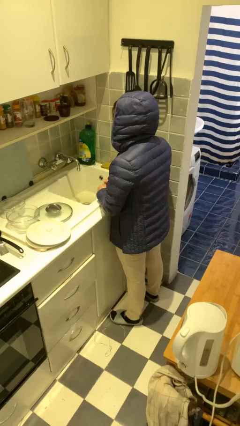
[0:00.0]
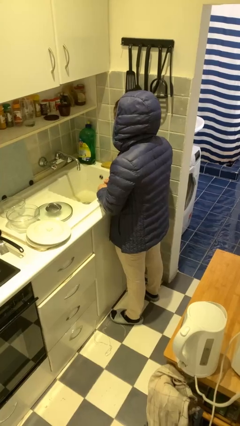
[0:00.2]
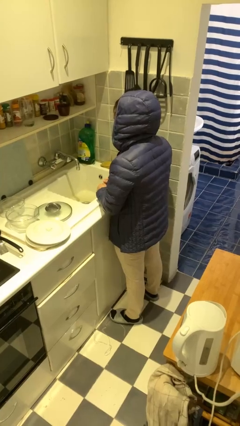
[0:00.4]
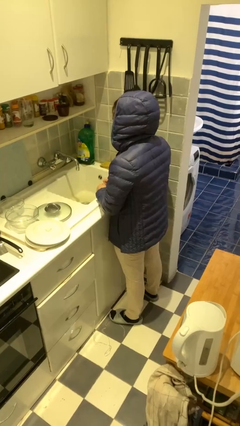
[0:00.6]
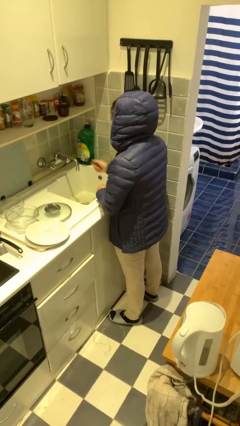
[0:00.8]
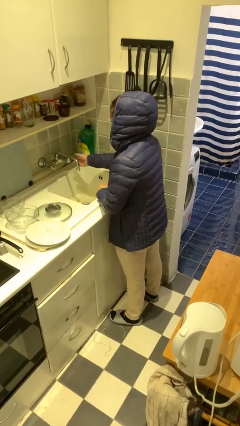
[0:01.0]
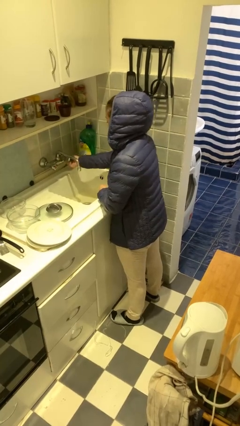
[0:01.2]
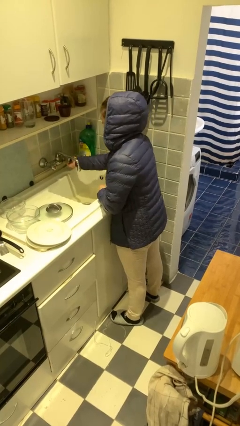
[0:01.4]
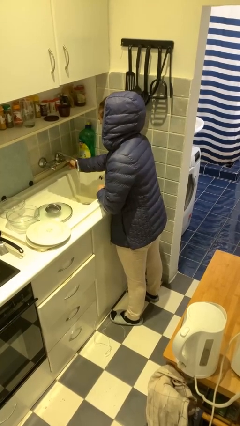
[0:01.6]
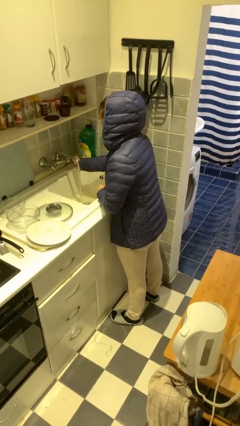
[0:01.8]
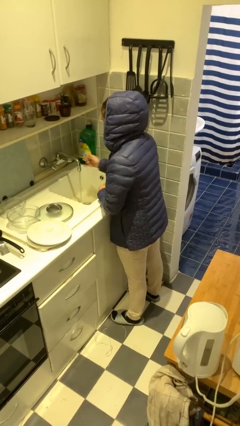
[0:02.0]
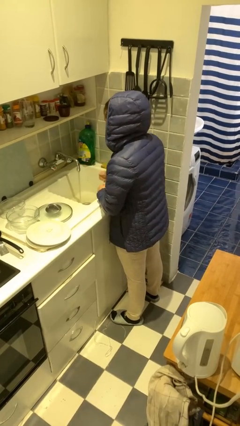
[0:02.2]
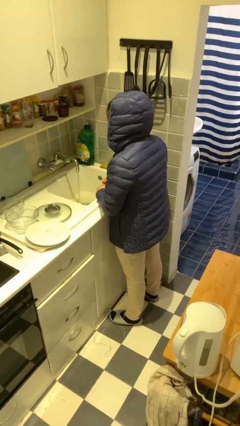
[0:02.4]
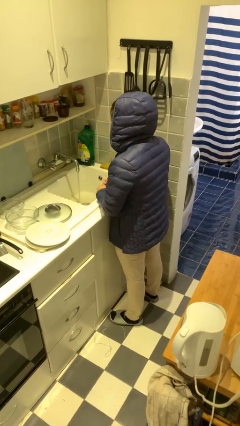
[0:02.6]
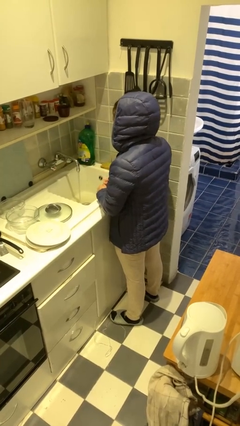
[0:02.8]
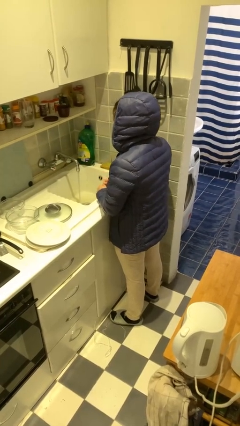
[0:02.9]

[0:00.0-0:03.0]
person turns on faucet

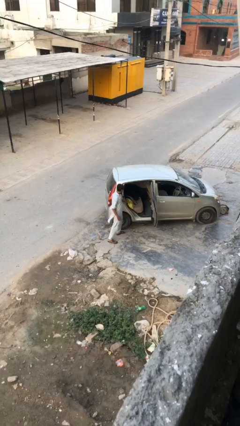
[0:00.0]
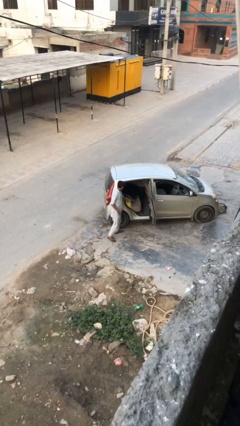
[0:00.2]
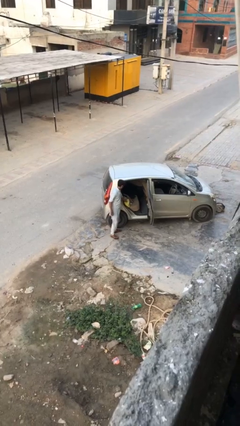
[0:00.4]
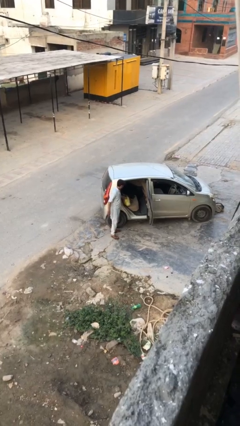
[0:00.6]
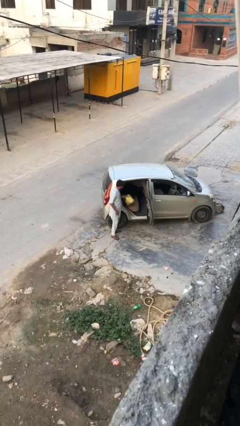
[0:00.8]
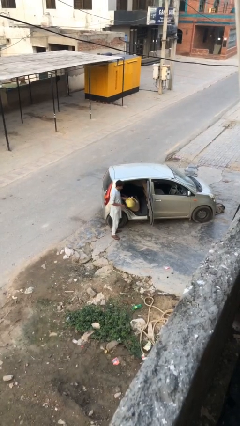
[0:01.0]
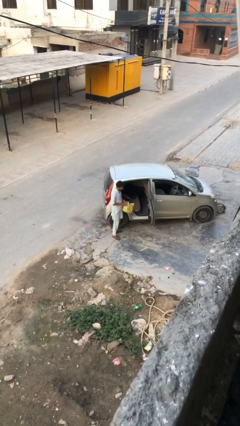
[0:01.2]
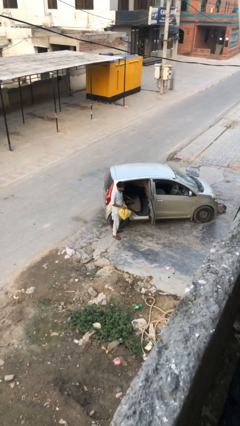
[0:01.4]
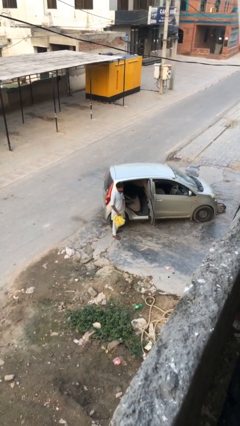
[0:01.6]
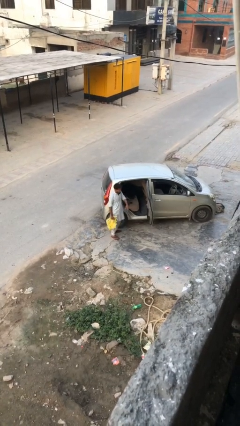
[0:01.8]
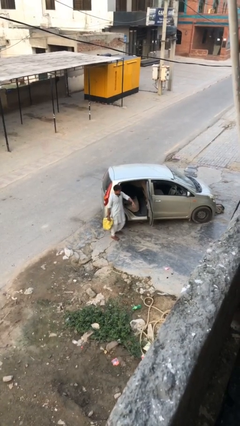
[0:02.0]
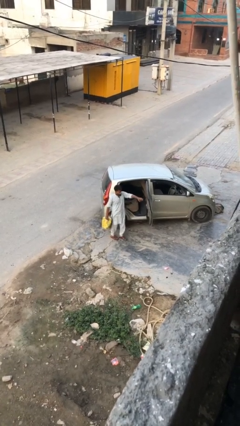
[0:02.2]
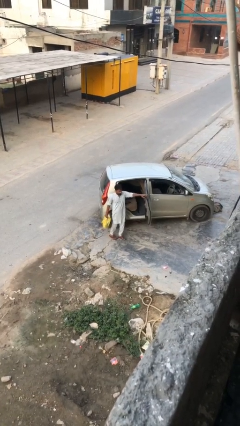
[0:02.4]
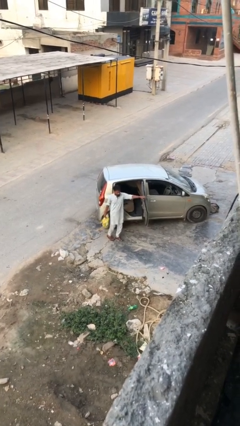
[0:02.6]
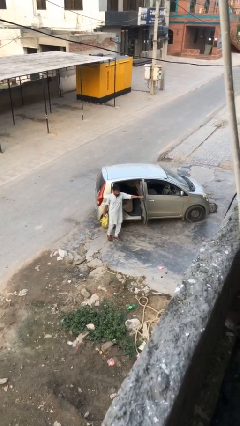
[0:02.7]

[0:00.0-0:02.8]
person unloads car

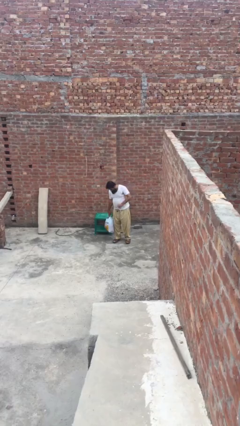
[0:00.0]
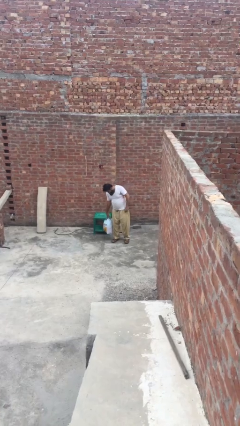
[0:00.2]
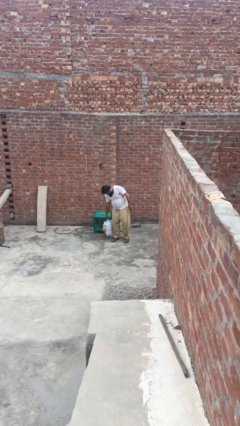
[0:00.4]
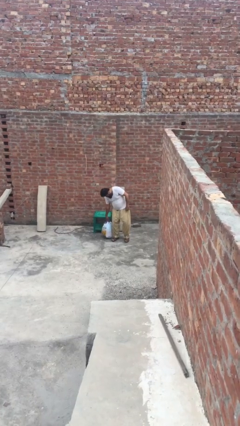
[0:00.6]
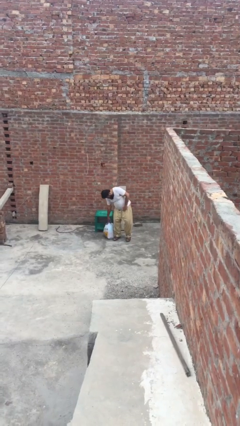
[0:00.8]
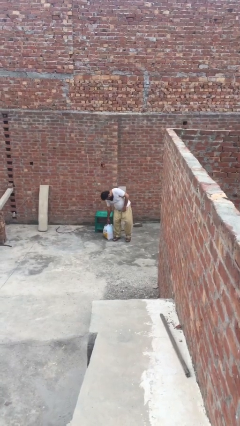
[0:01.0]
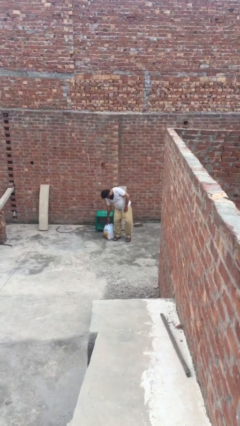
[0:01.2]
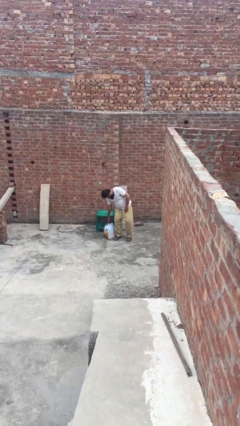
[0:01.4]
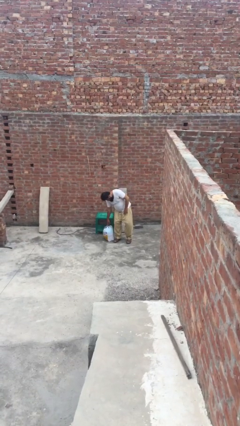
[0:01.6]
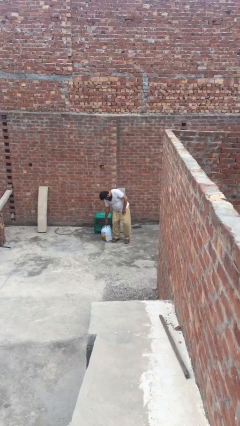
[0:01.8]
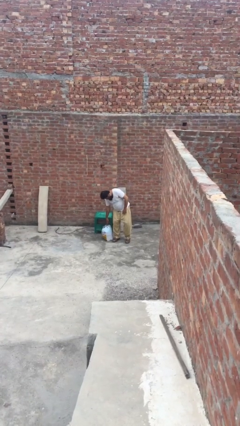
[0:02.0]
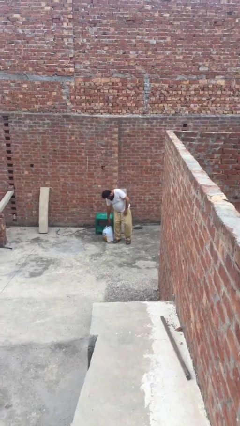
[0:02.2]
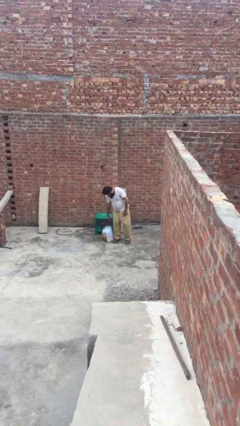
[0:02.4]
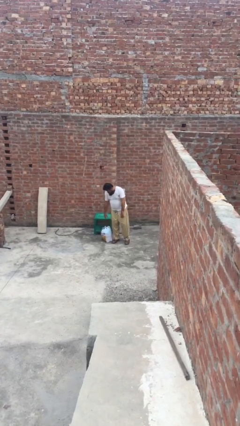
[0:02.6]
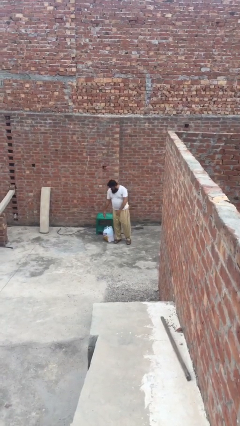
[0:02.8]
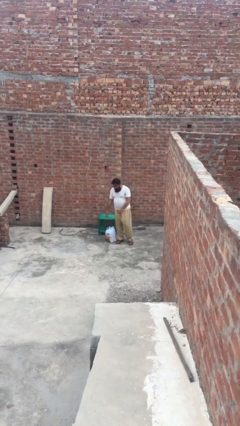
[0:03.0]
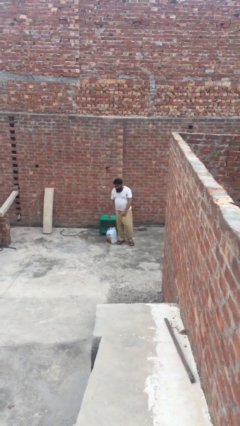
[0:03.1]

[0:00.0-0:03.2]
person puts down object on floor

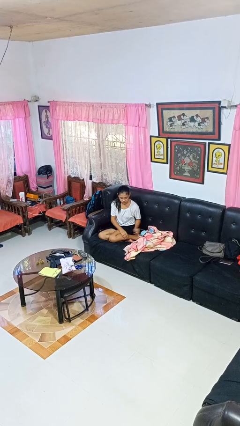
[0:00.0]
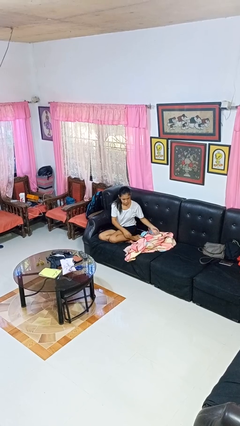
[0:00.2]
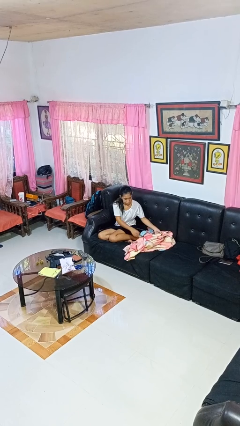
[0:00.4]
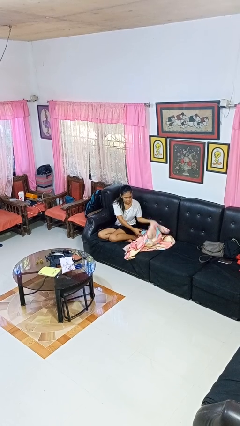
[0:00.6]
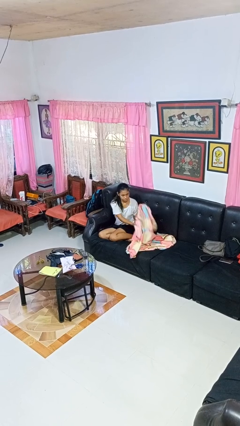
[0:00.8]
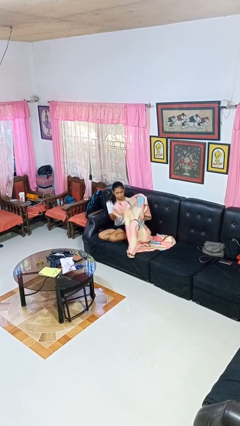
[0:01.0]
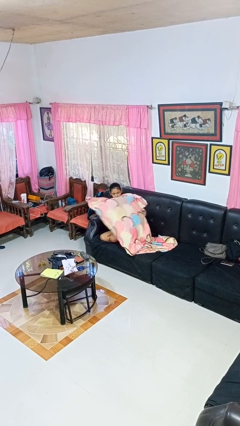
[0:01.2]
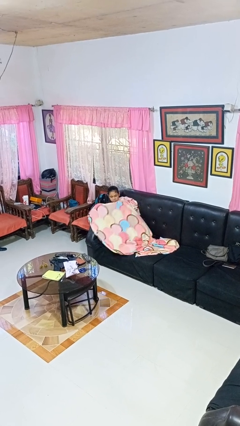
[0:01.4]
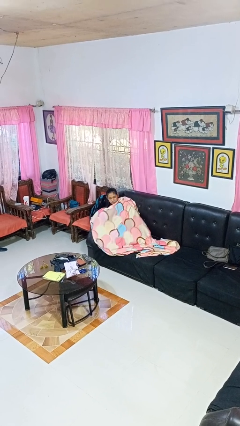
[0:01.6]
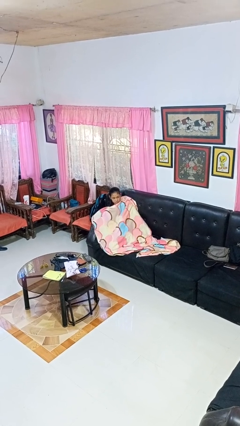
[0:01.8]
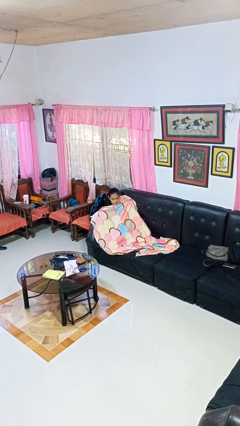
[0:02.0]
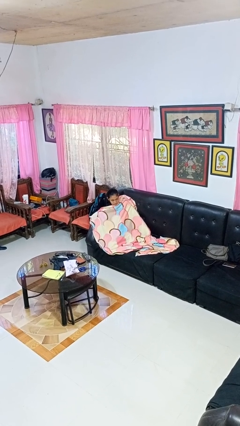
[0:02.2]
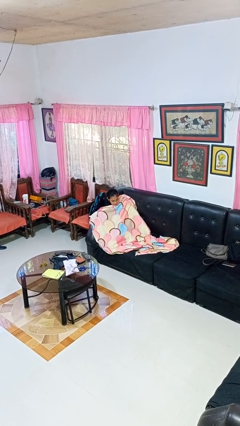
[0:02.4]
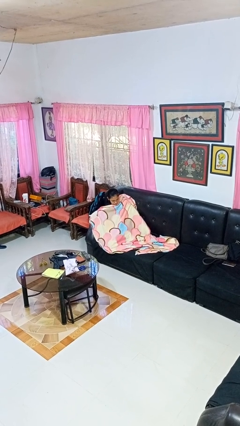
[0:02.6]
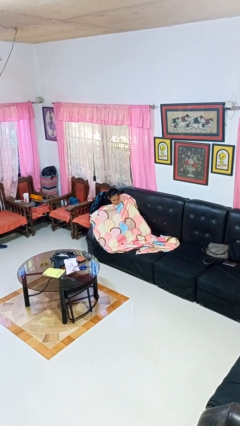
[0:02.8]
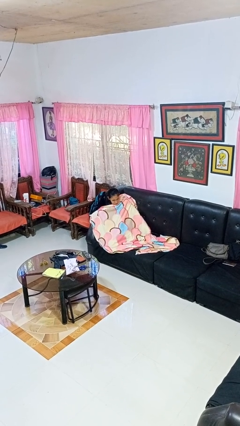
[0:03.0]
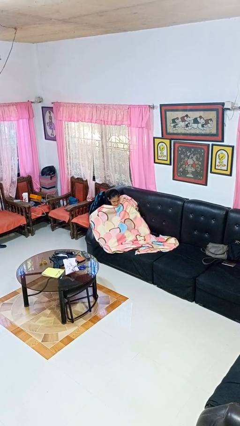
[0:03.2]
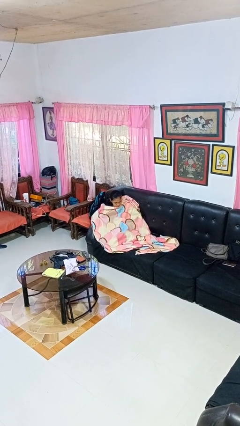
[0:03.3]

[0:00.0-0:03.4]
person covers with blanket

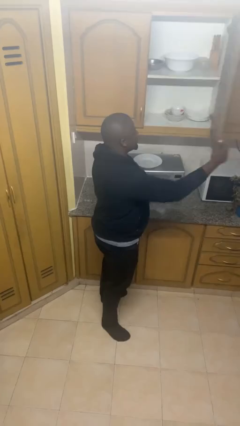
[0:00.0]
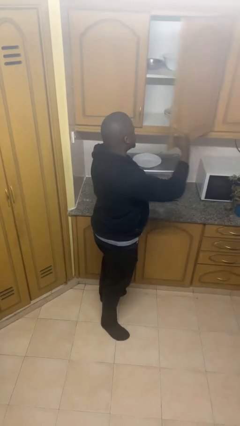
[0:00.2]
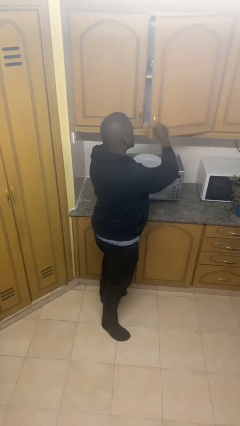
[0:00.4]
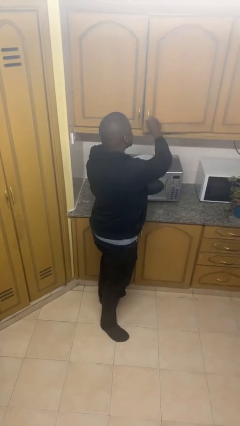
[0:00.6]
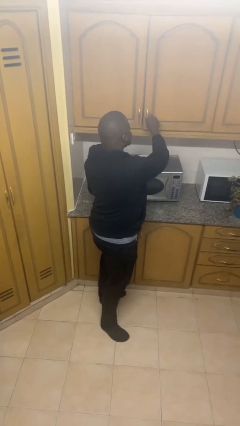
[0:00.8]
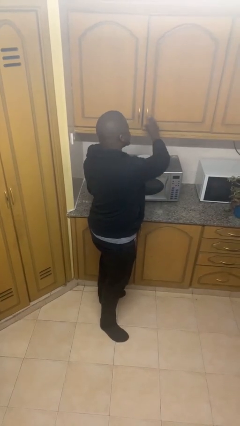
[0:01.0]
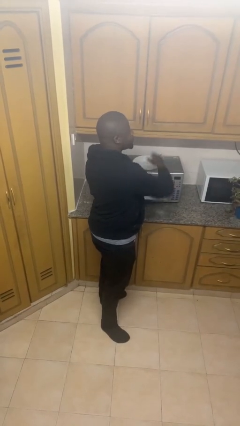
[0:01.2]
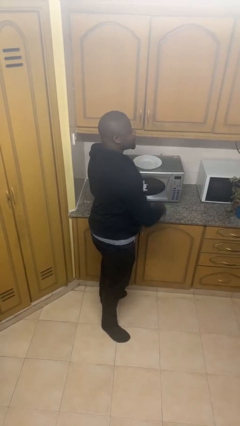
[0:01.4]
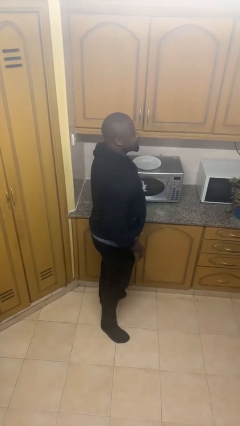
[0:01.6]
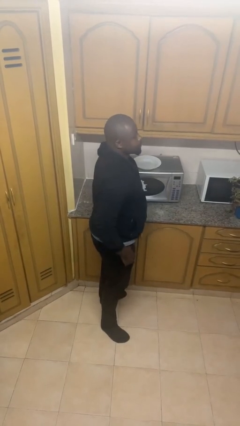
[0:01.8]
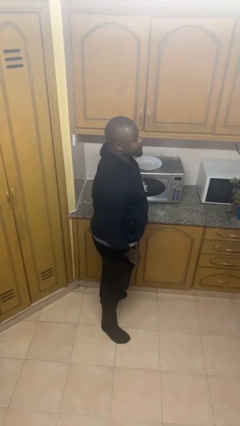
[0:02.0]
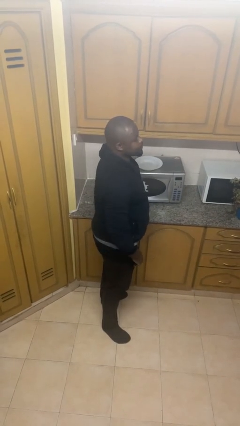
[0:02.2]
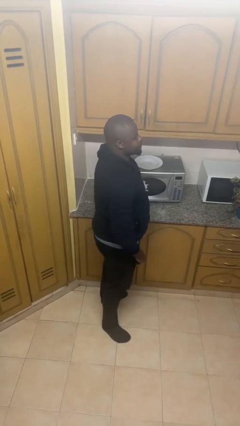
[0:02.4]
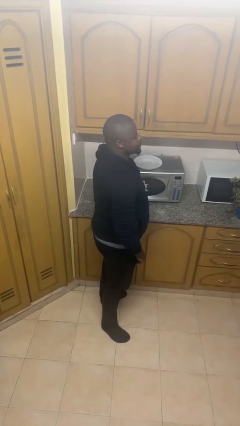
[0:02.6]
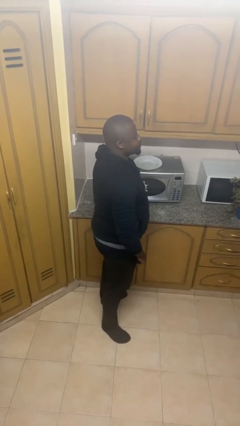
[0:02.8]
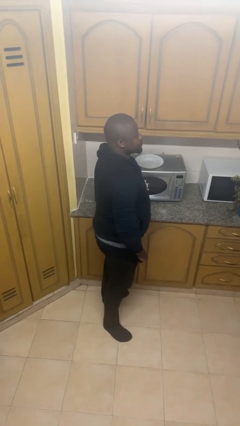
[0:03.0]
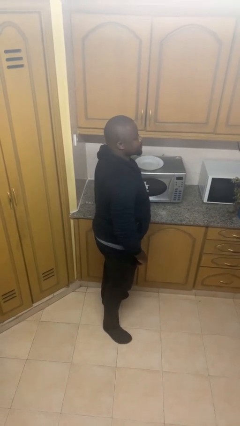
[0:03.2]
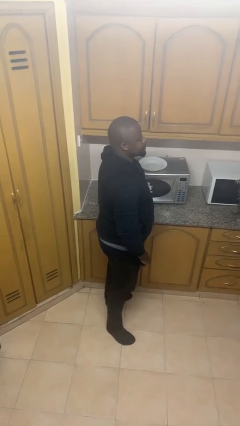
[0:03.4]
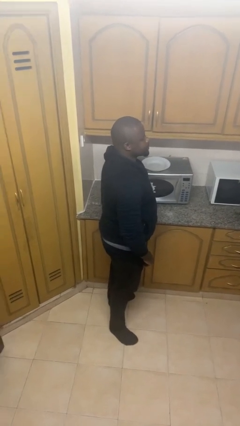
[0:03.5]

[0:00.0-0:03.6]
person closes cabinet

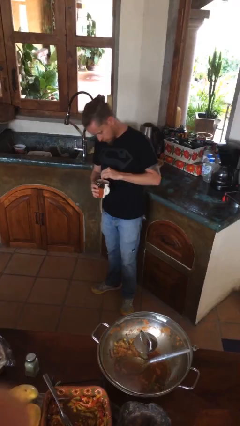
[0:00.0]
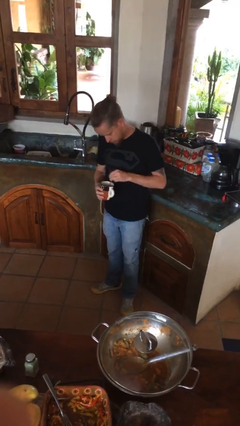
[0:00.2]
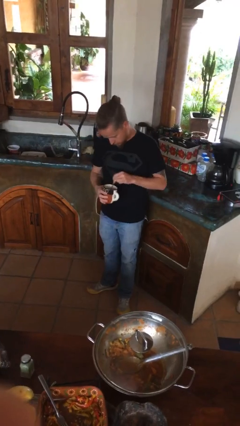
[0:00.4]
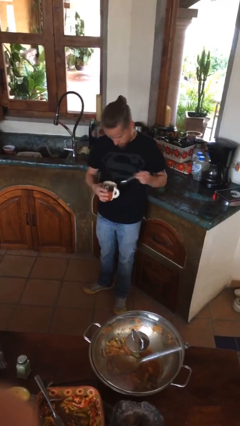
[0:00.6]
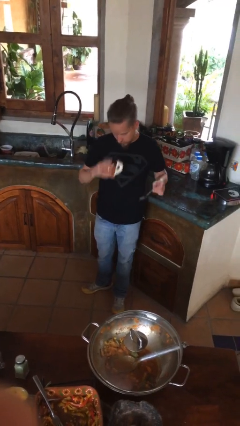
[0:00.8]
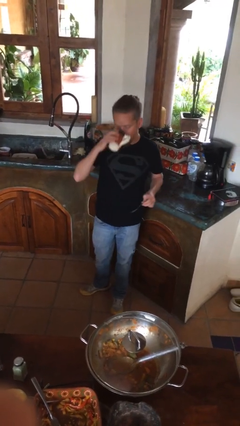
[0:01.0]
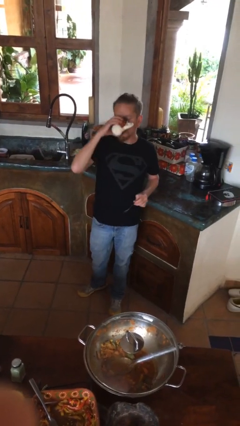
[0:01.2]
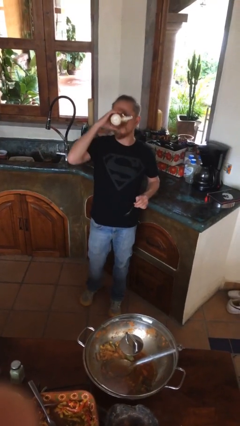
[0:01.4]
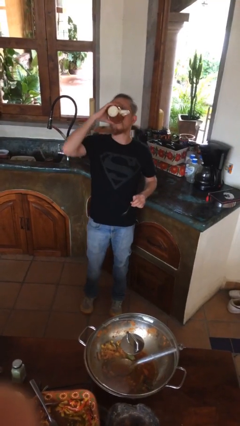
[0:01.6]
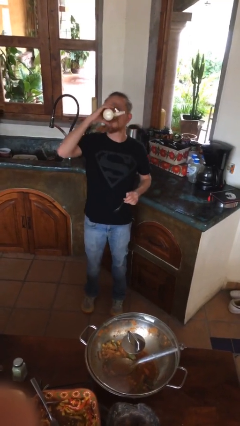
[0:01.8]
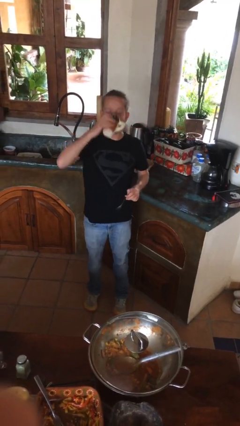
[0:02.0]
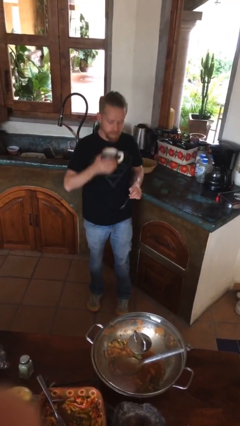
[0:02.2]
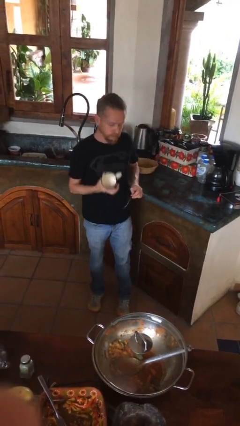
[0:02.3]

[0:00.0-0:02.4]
person drinks from mug
